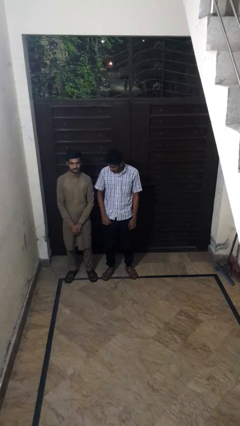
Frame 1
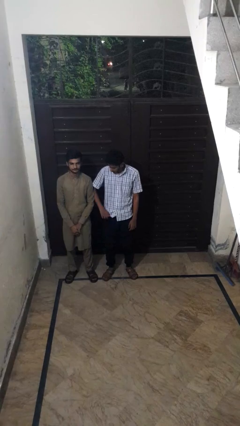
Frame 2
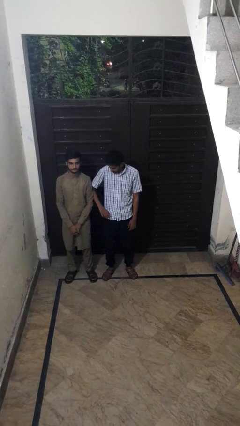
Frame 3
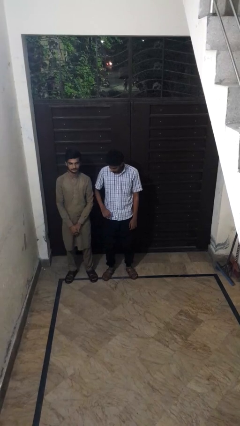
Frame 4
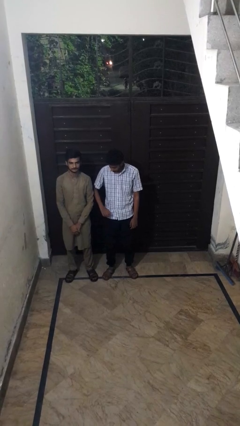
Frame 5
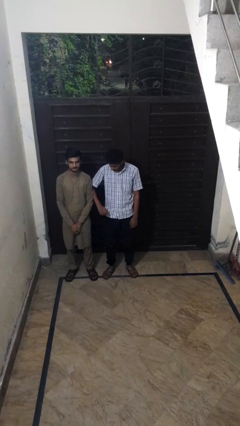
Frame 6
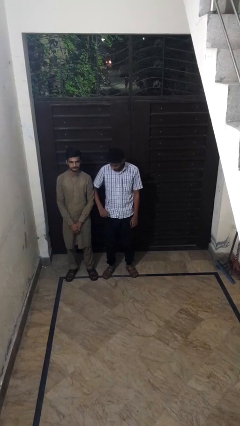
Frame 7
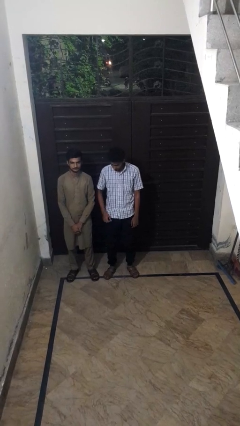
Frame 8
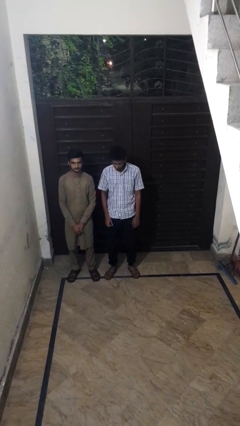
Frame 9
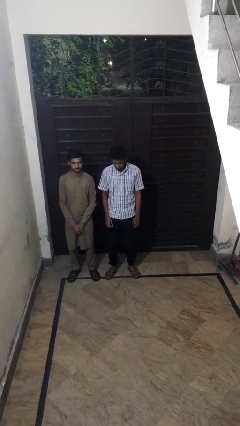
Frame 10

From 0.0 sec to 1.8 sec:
person nudges person with elbow

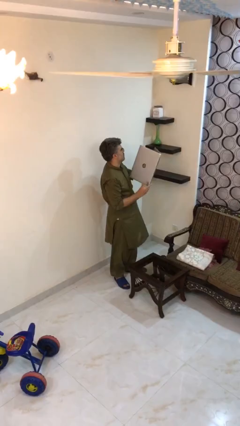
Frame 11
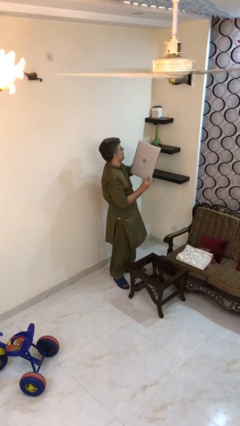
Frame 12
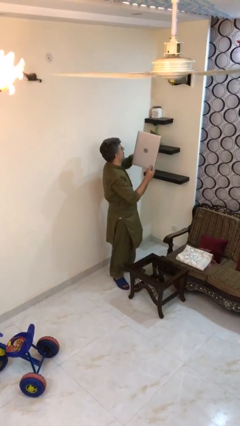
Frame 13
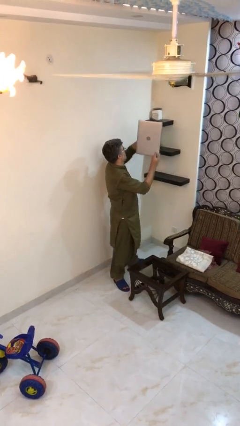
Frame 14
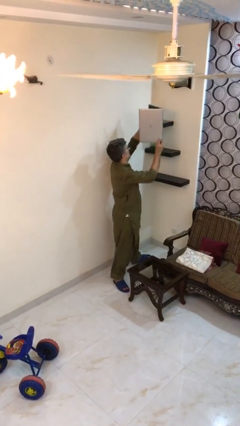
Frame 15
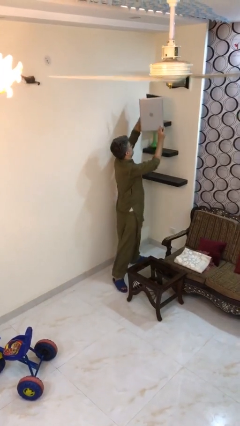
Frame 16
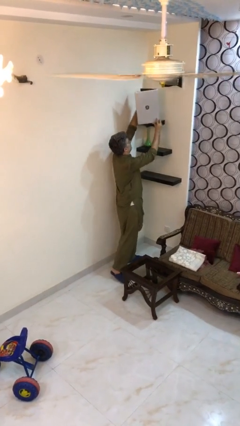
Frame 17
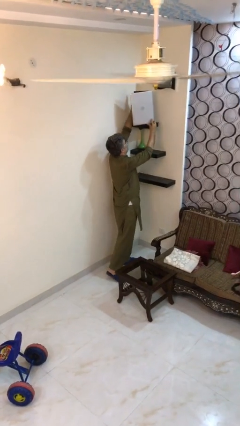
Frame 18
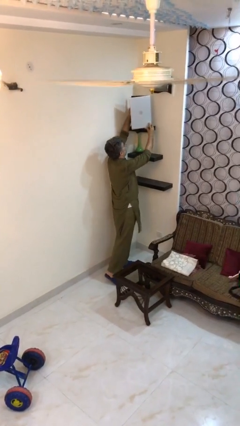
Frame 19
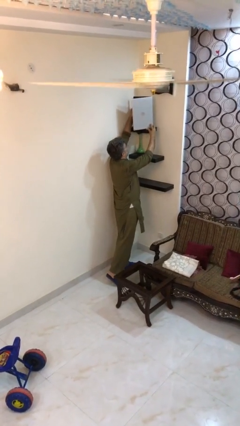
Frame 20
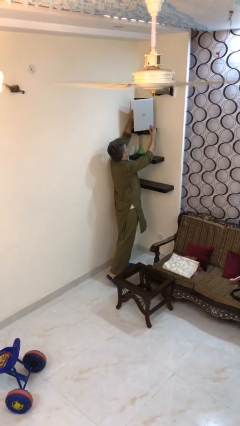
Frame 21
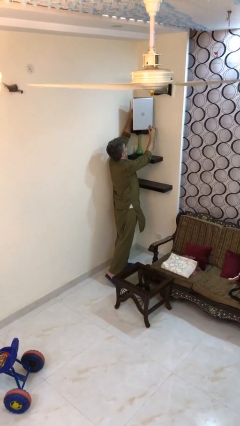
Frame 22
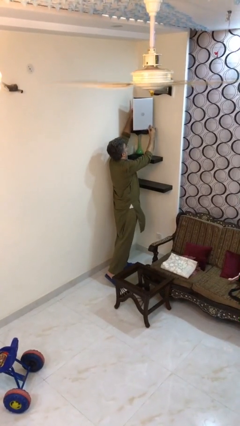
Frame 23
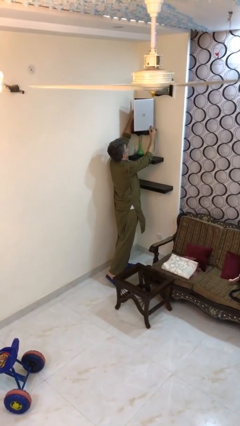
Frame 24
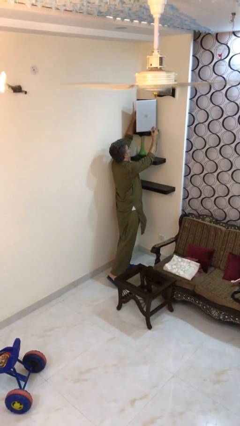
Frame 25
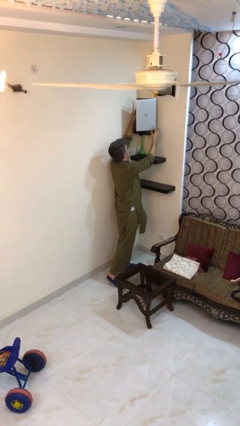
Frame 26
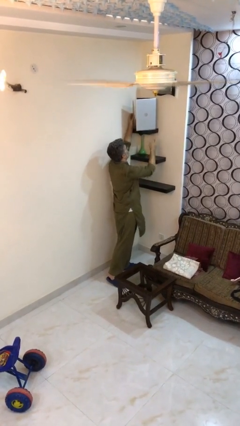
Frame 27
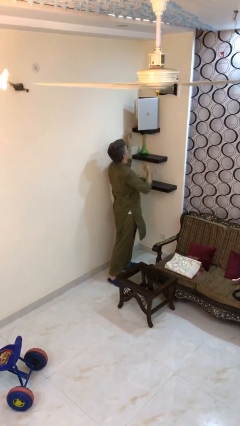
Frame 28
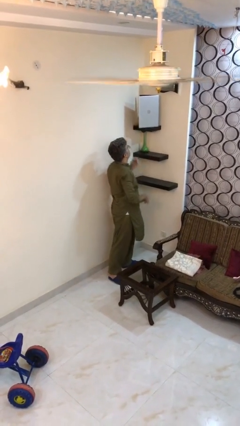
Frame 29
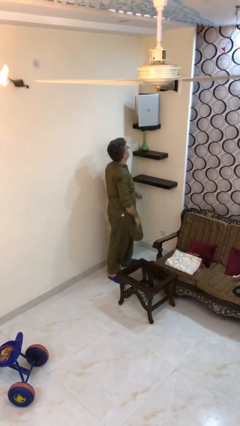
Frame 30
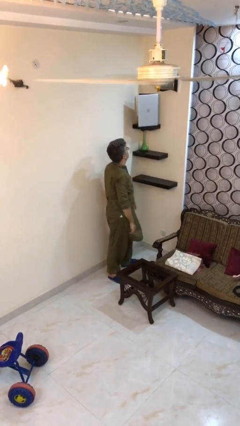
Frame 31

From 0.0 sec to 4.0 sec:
person puts down object on shelf

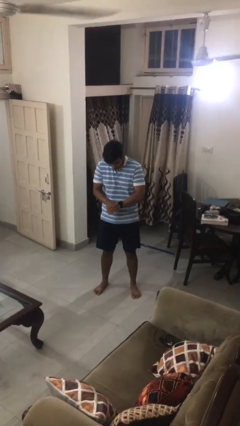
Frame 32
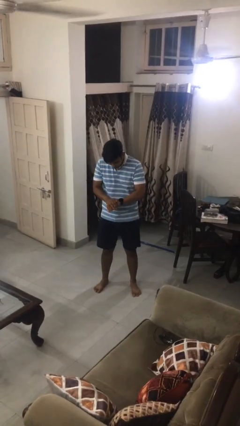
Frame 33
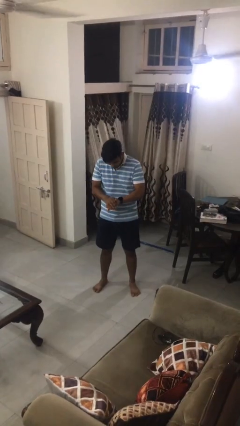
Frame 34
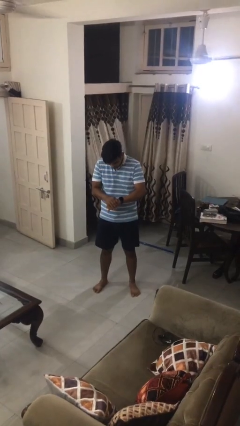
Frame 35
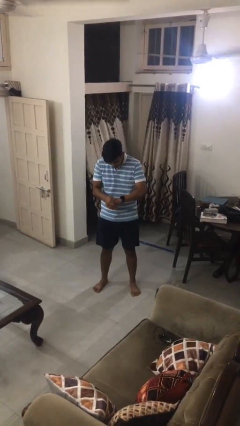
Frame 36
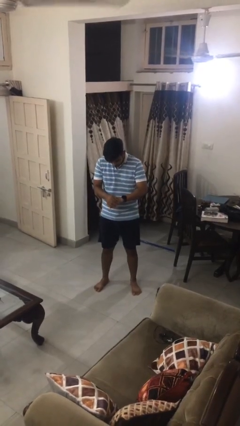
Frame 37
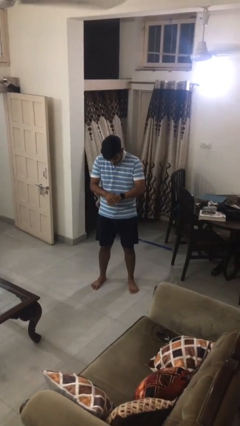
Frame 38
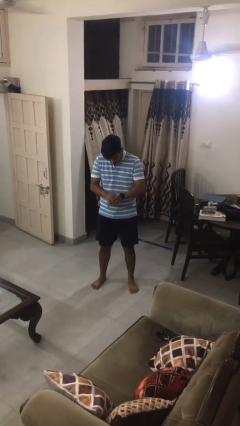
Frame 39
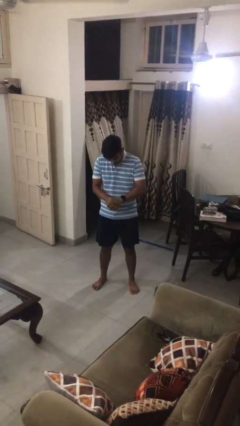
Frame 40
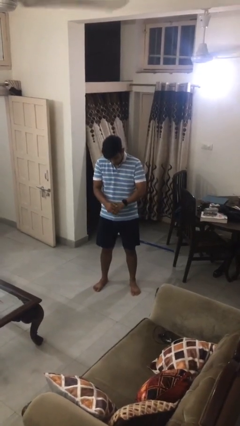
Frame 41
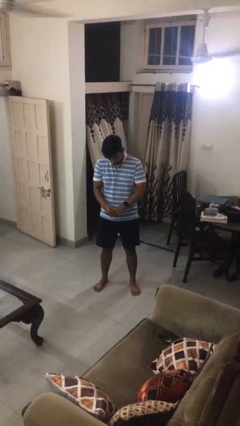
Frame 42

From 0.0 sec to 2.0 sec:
person swats bug

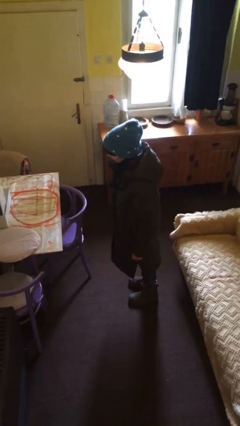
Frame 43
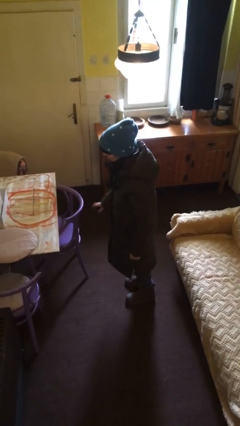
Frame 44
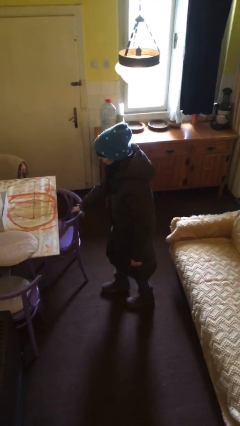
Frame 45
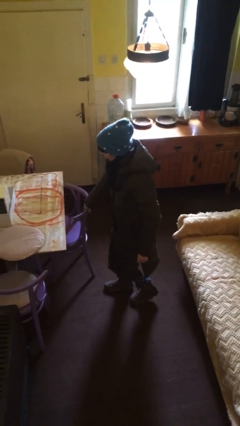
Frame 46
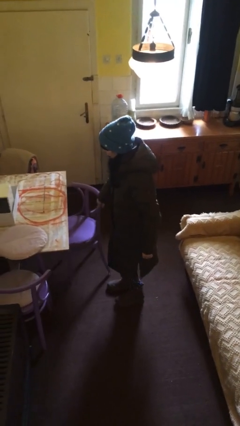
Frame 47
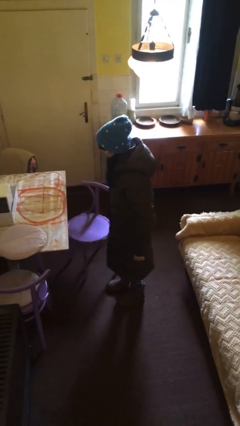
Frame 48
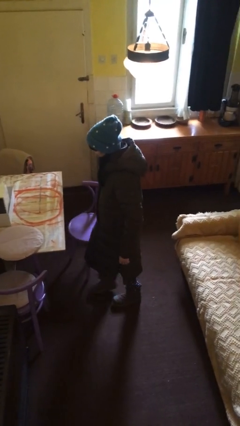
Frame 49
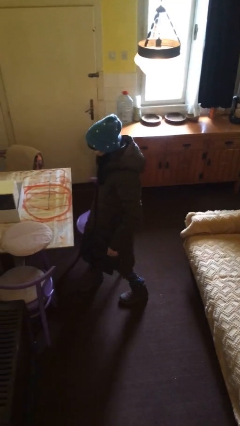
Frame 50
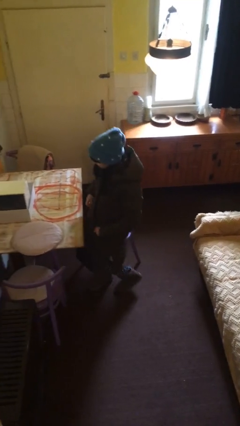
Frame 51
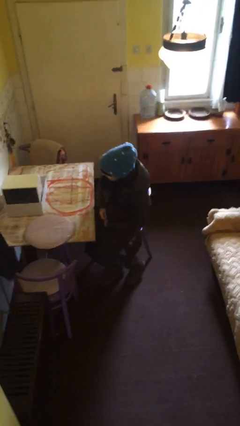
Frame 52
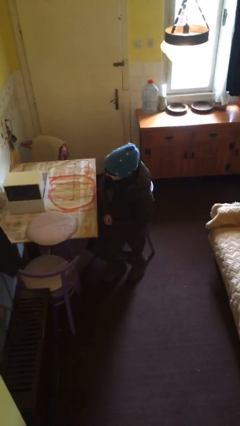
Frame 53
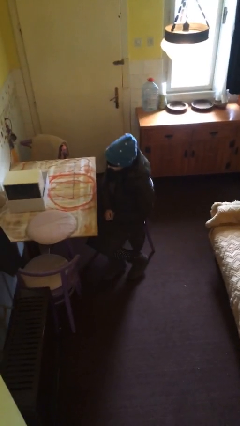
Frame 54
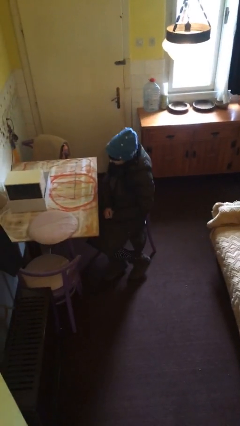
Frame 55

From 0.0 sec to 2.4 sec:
person sits down

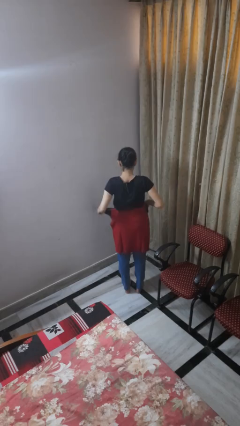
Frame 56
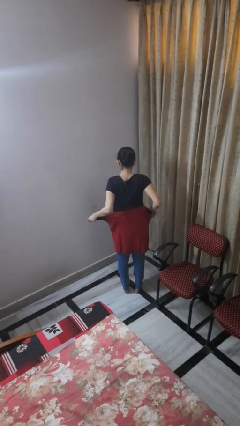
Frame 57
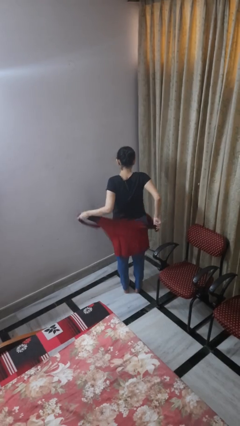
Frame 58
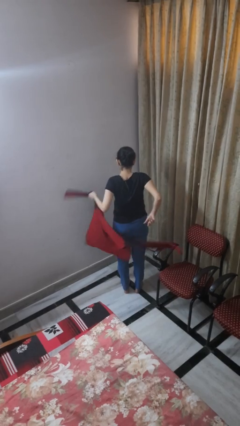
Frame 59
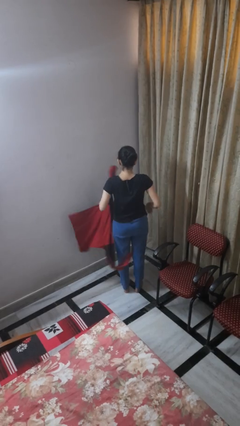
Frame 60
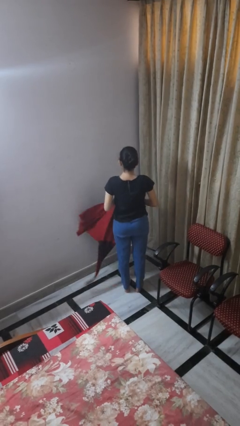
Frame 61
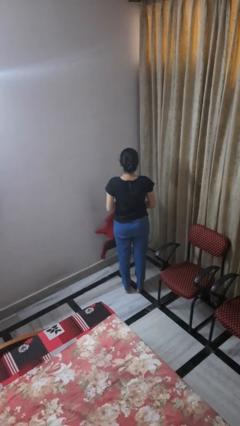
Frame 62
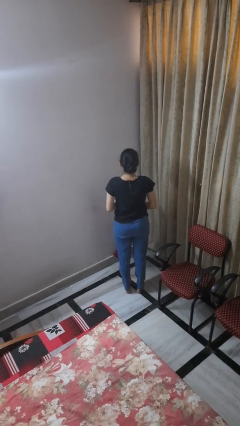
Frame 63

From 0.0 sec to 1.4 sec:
person unties jacket around waist

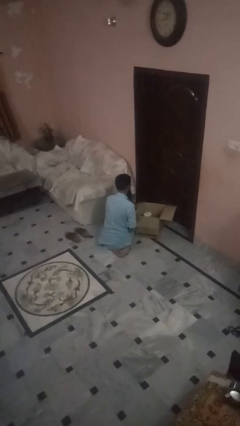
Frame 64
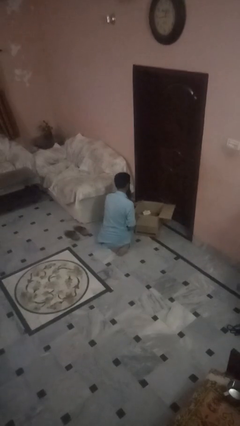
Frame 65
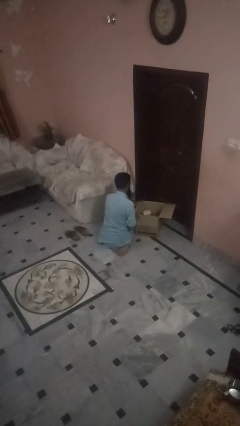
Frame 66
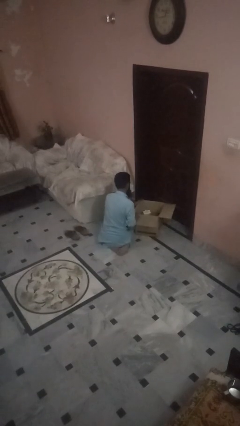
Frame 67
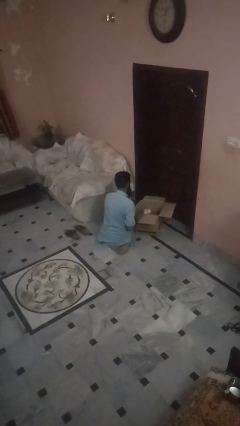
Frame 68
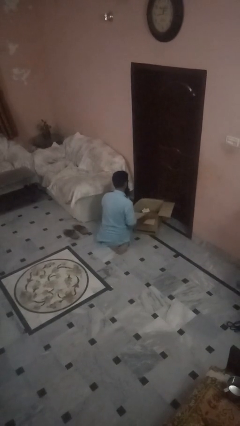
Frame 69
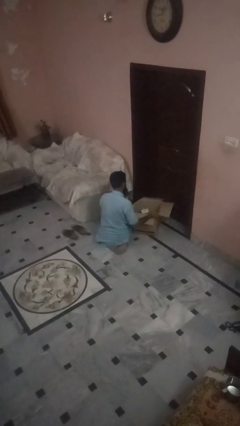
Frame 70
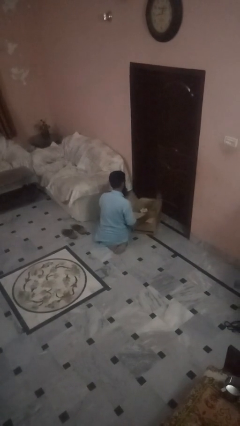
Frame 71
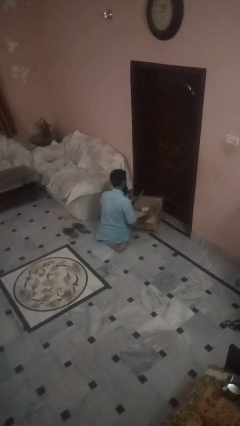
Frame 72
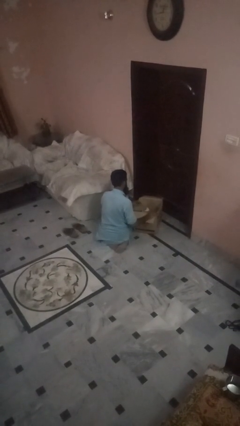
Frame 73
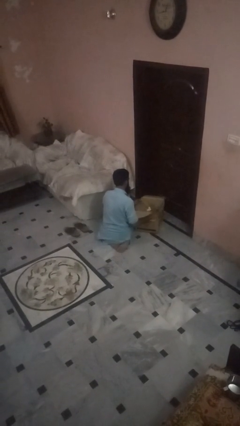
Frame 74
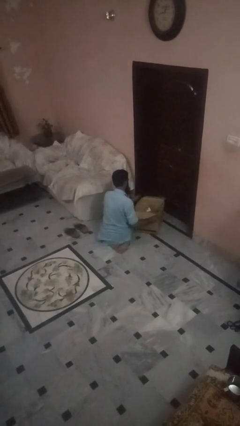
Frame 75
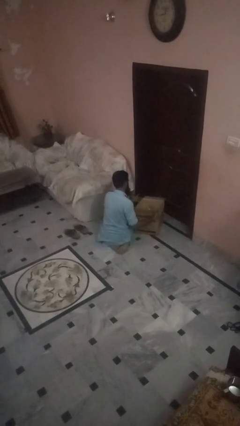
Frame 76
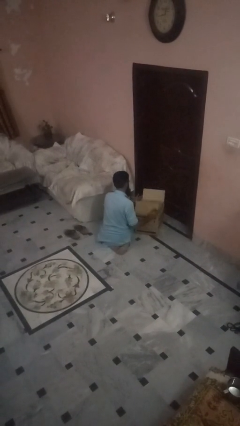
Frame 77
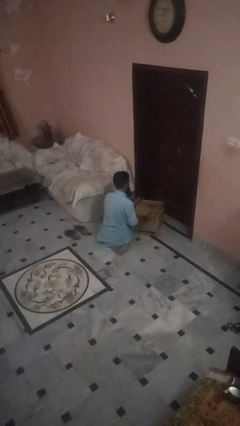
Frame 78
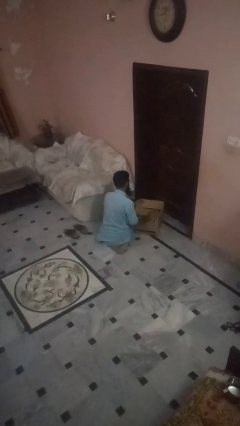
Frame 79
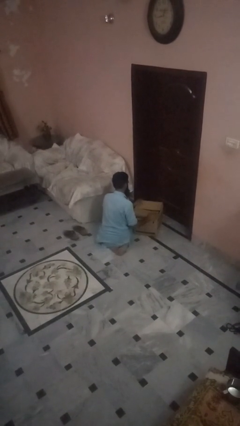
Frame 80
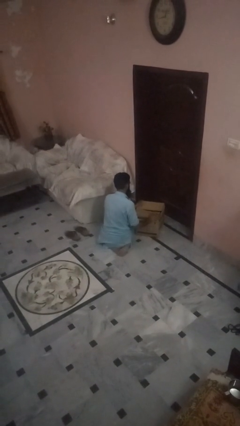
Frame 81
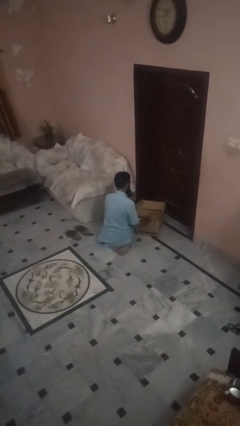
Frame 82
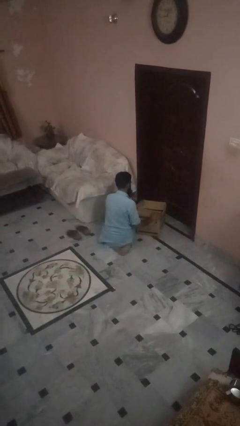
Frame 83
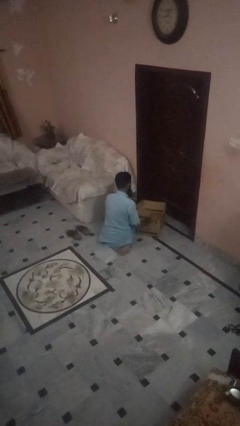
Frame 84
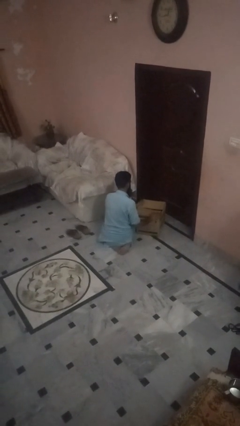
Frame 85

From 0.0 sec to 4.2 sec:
person closes box

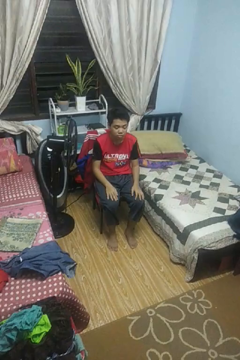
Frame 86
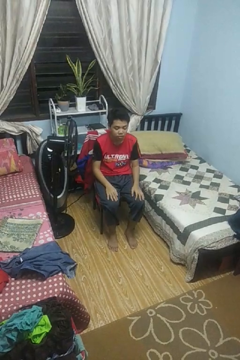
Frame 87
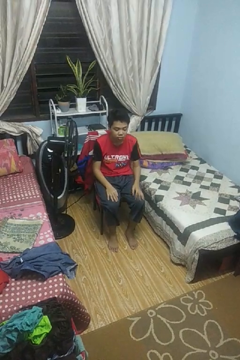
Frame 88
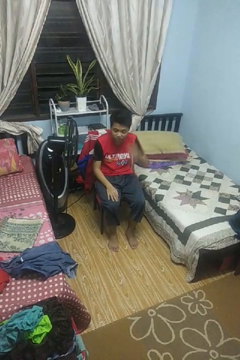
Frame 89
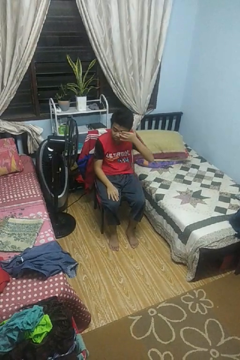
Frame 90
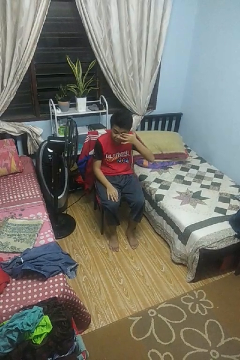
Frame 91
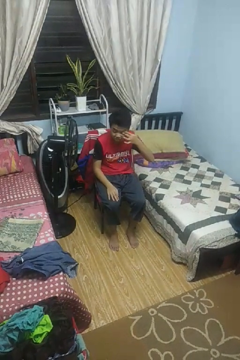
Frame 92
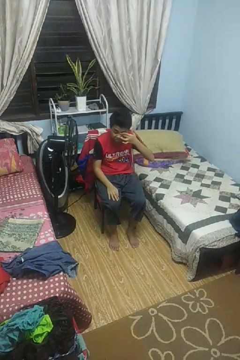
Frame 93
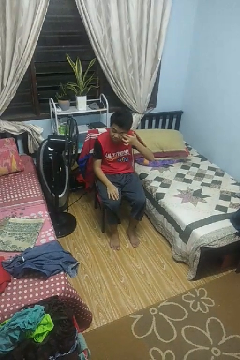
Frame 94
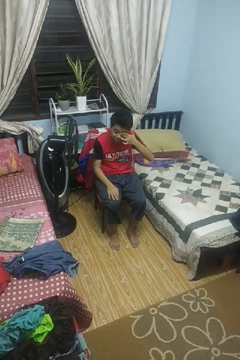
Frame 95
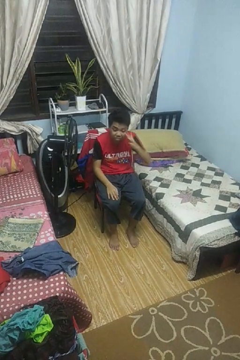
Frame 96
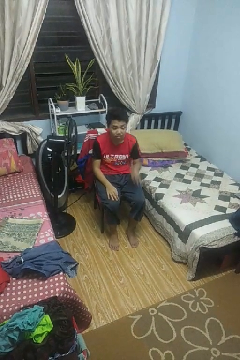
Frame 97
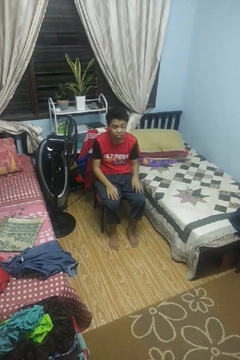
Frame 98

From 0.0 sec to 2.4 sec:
person rubs eyes
